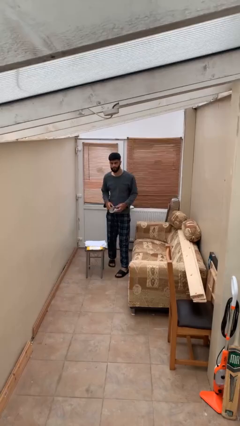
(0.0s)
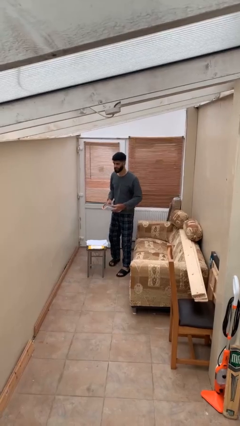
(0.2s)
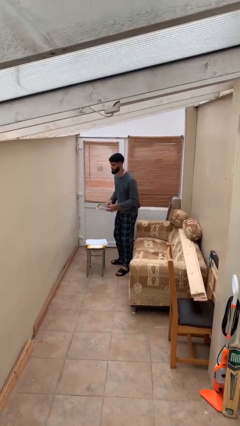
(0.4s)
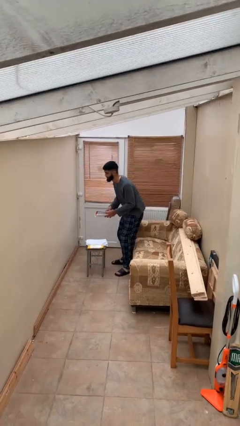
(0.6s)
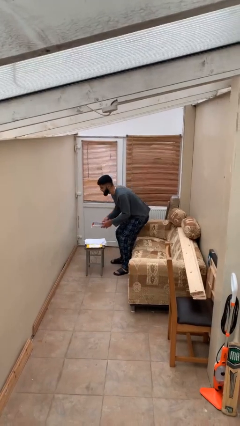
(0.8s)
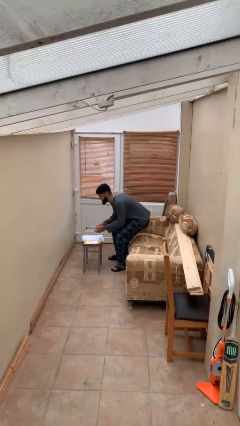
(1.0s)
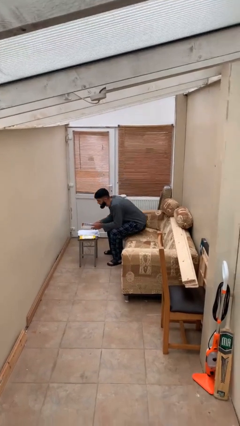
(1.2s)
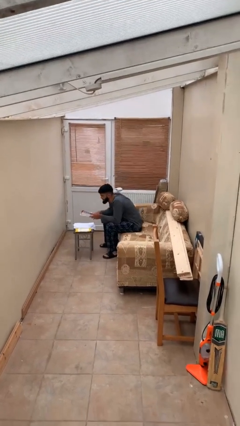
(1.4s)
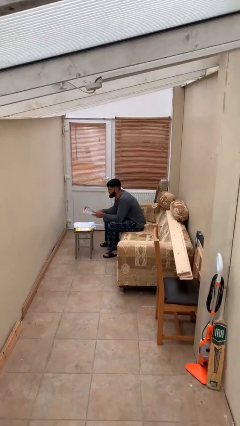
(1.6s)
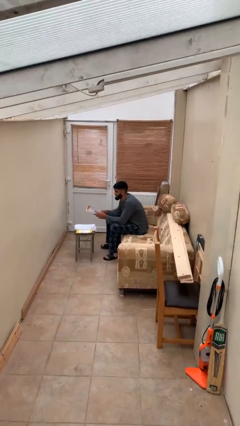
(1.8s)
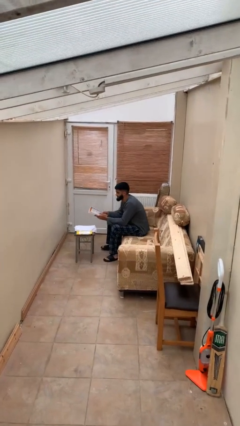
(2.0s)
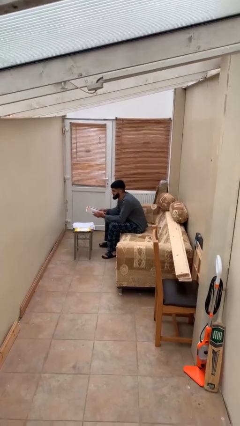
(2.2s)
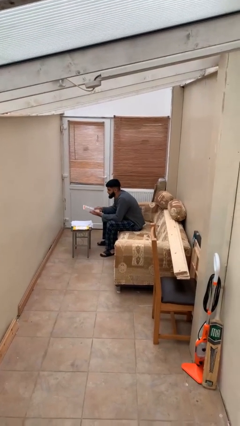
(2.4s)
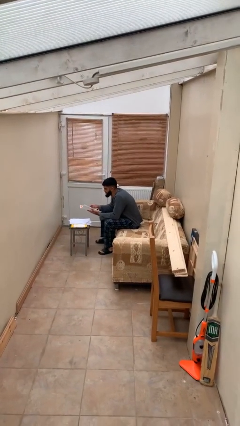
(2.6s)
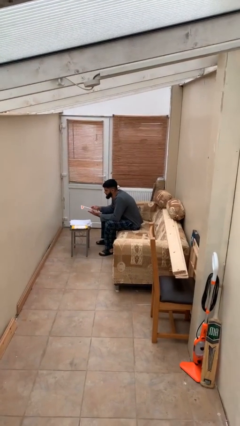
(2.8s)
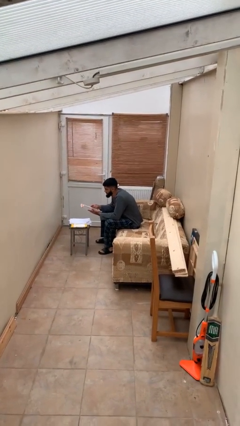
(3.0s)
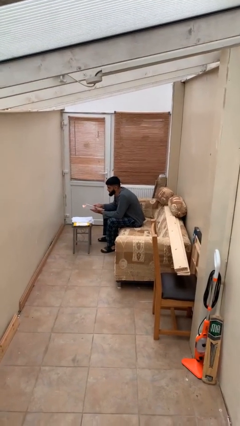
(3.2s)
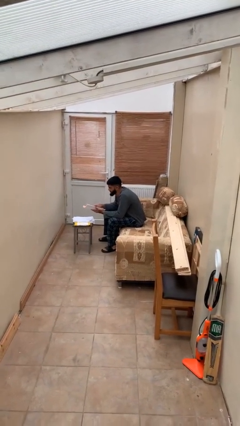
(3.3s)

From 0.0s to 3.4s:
person sits down

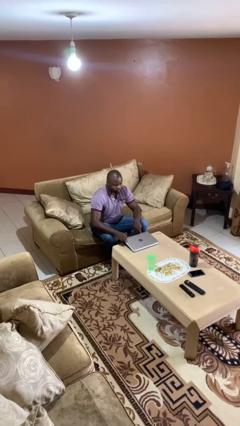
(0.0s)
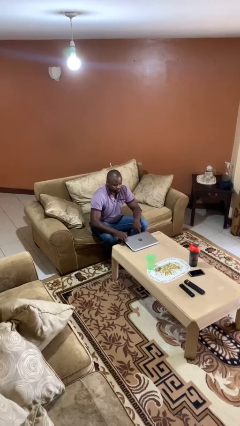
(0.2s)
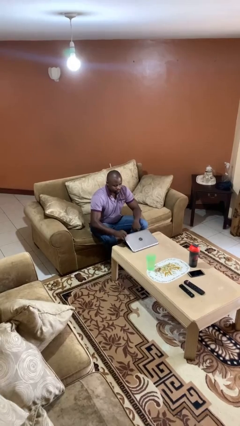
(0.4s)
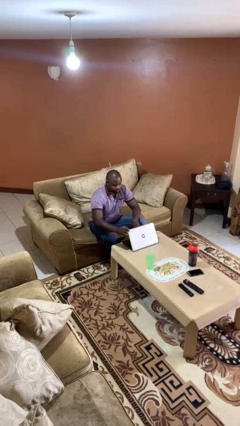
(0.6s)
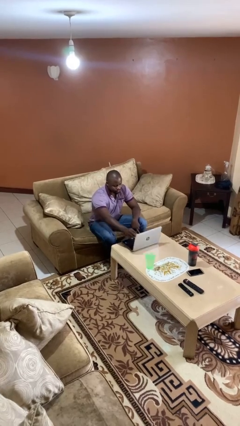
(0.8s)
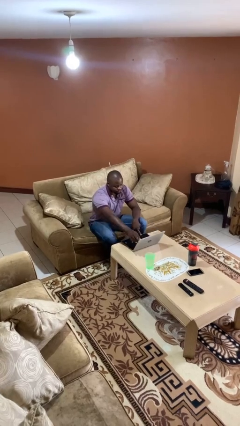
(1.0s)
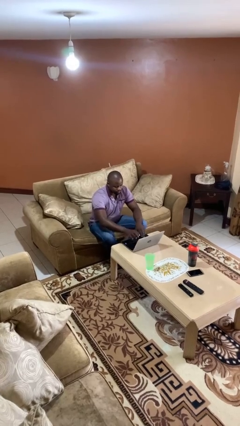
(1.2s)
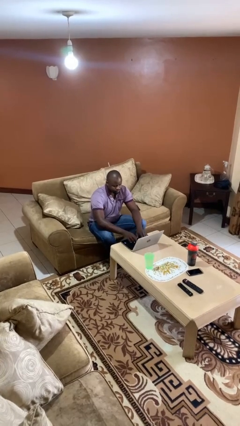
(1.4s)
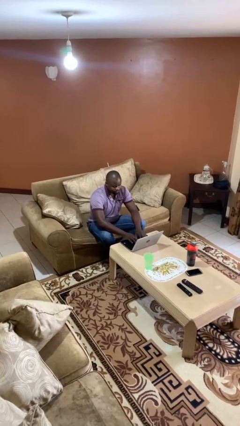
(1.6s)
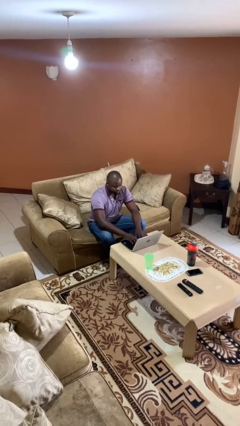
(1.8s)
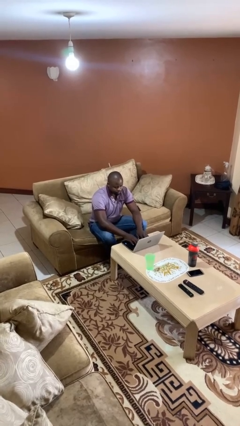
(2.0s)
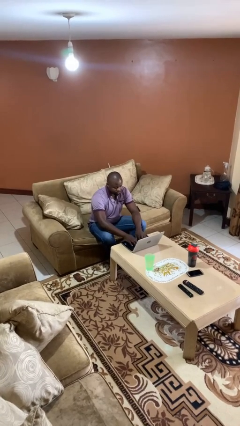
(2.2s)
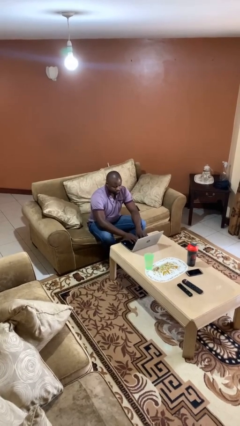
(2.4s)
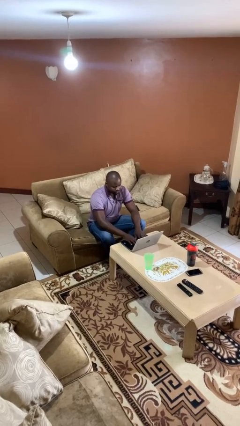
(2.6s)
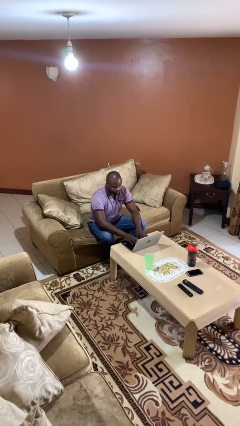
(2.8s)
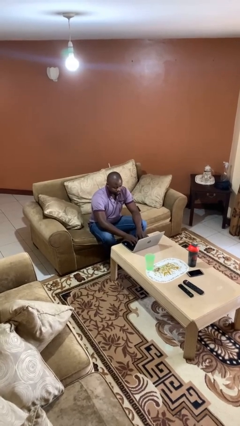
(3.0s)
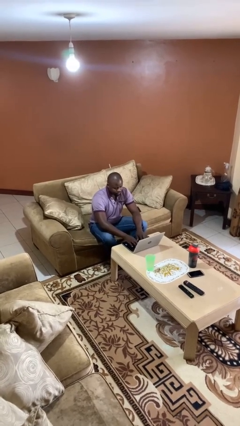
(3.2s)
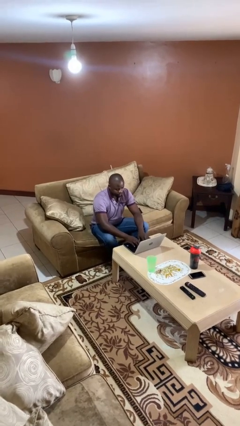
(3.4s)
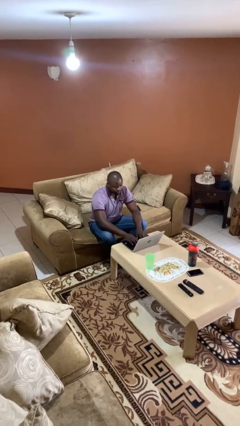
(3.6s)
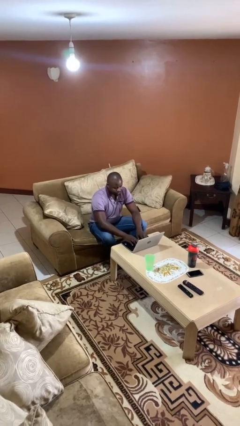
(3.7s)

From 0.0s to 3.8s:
person interacts with laptop

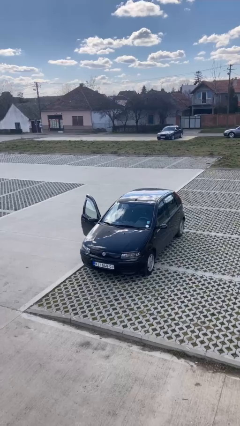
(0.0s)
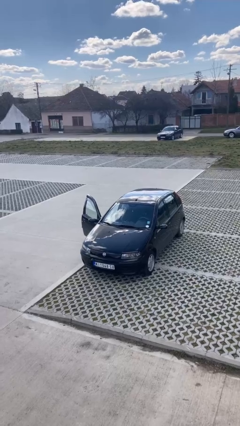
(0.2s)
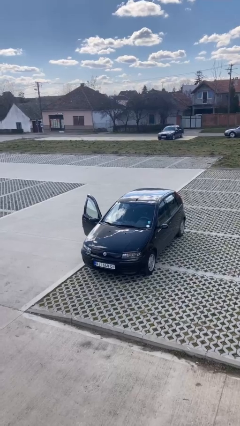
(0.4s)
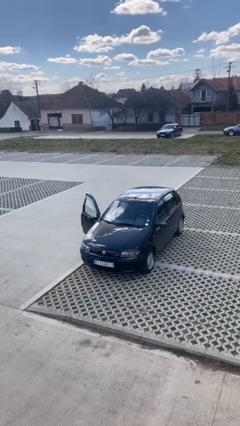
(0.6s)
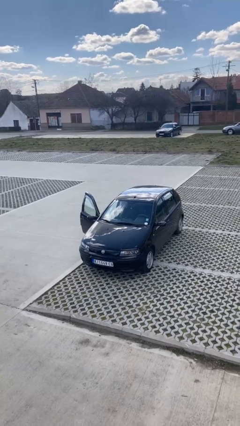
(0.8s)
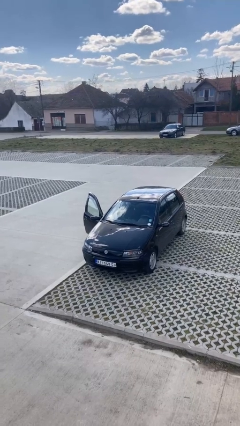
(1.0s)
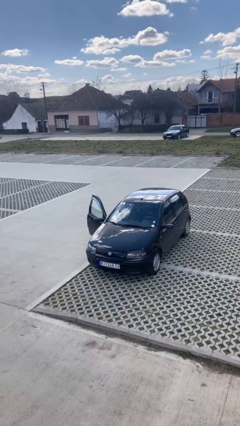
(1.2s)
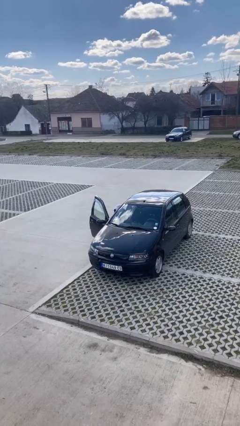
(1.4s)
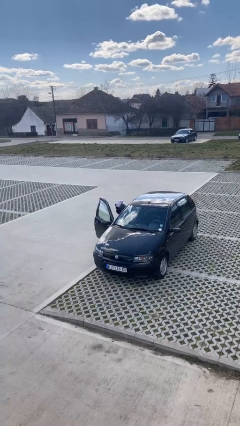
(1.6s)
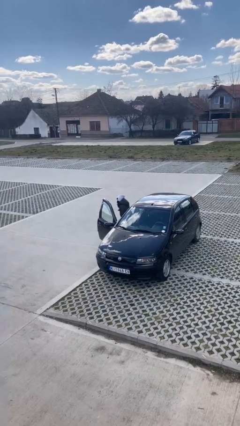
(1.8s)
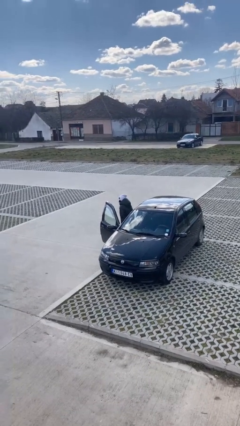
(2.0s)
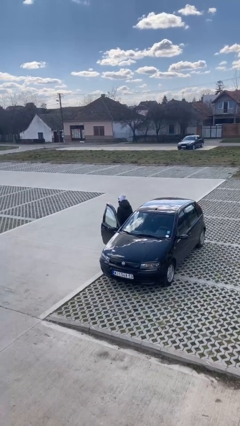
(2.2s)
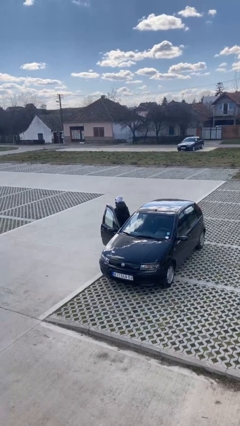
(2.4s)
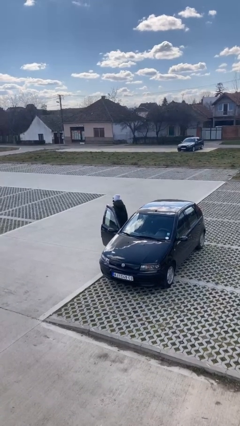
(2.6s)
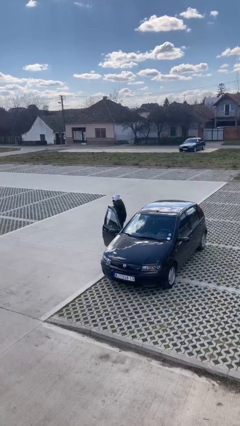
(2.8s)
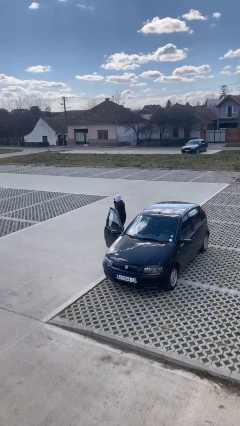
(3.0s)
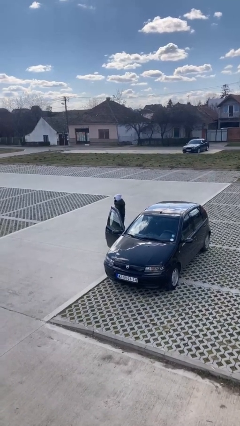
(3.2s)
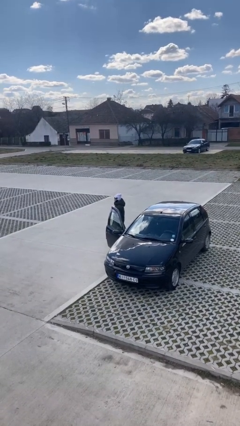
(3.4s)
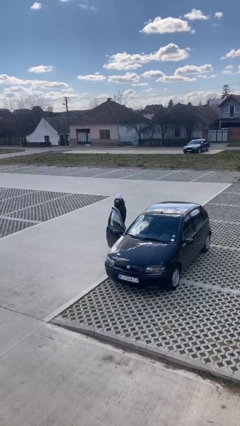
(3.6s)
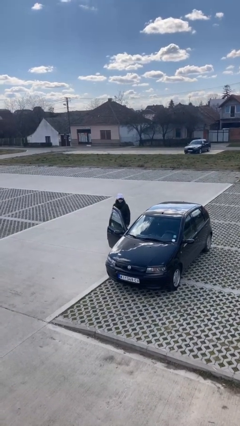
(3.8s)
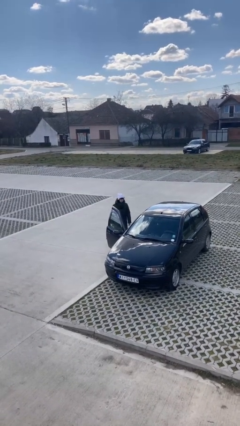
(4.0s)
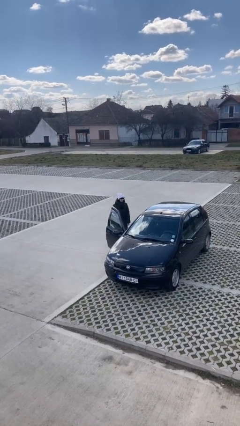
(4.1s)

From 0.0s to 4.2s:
person exits car

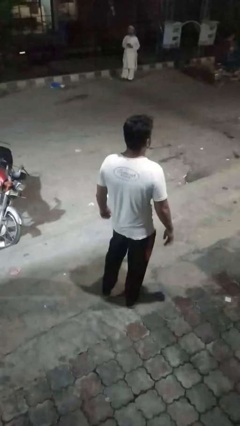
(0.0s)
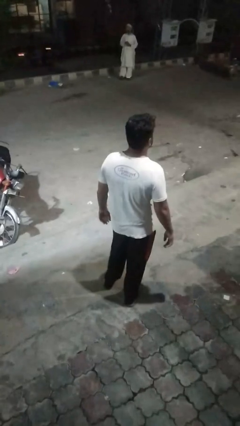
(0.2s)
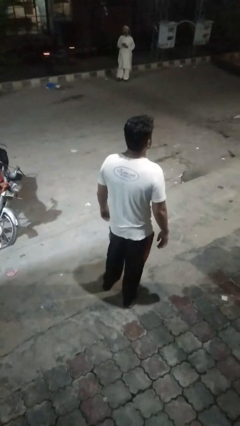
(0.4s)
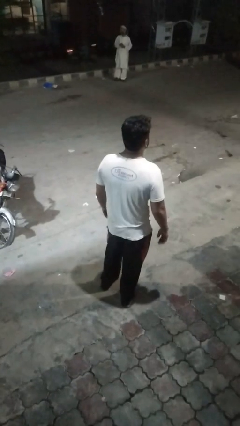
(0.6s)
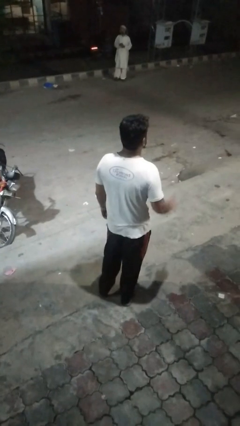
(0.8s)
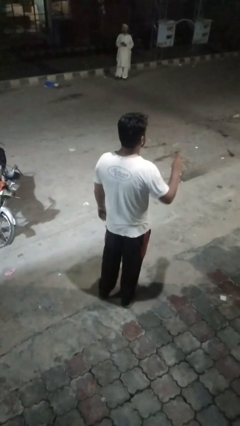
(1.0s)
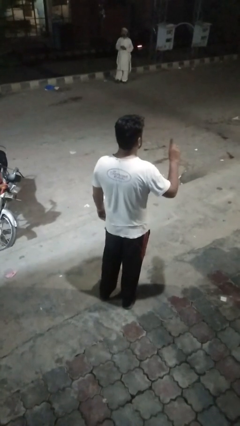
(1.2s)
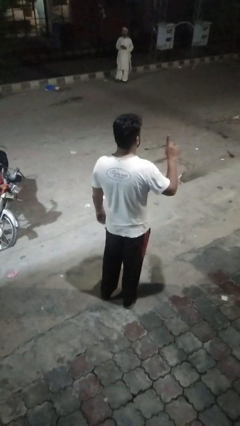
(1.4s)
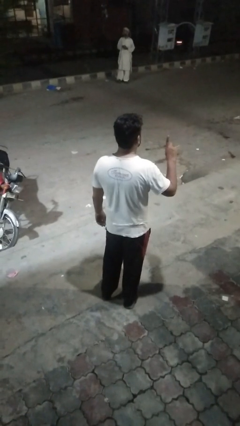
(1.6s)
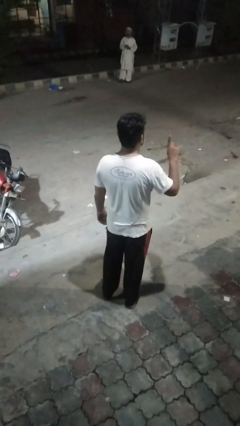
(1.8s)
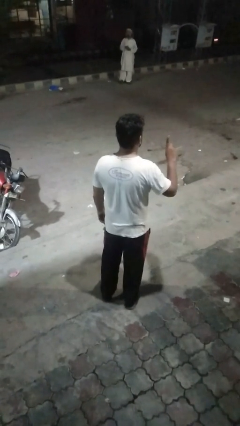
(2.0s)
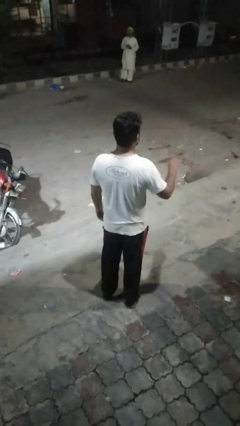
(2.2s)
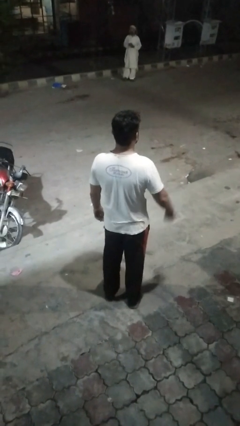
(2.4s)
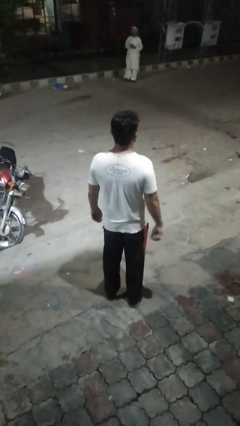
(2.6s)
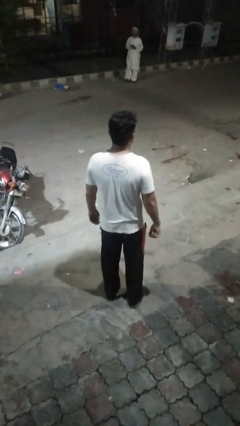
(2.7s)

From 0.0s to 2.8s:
person gestures number one

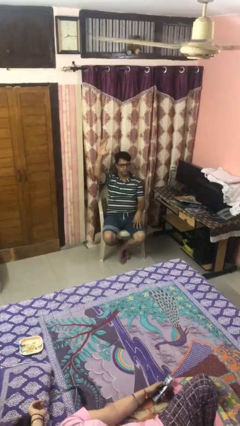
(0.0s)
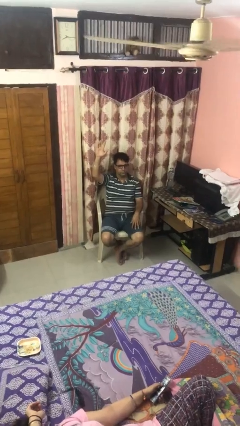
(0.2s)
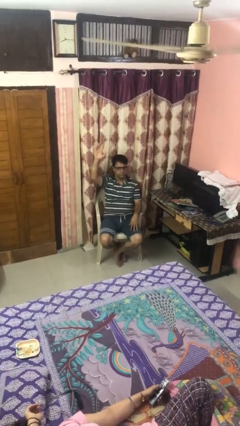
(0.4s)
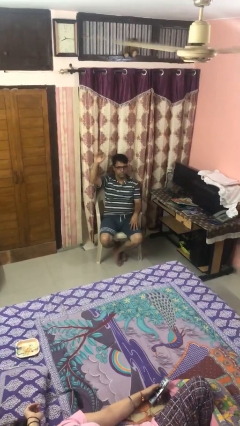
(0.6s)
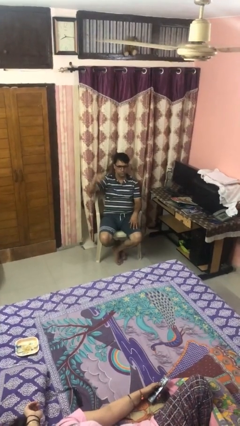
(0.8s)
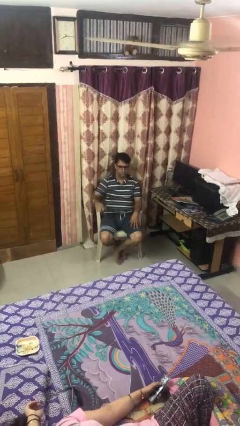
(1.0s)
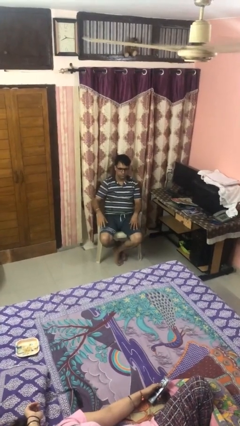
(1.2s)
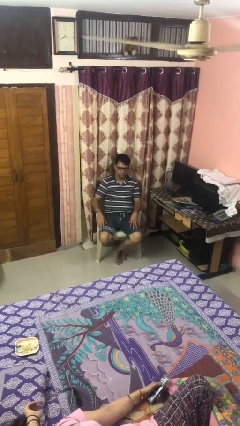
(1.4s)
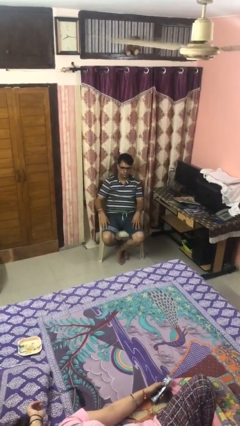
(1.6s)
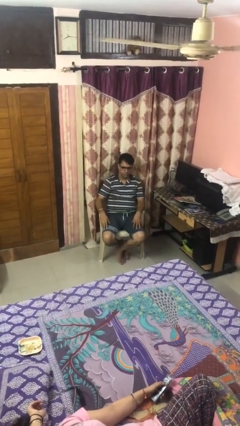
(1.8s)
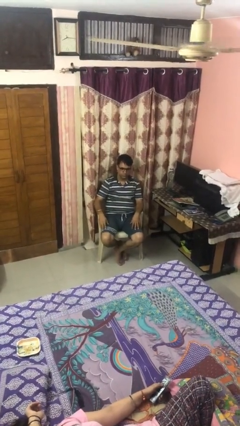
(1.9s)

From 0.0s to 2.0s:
person gestures lower hand

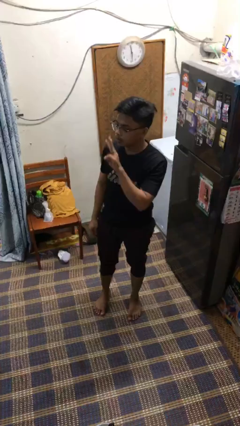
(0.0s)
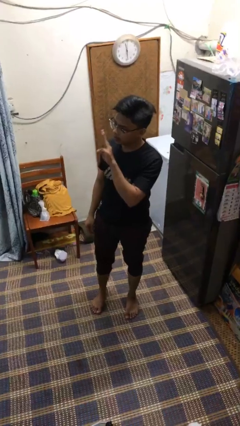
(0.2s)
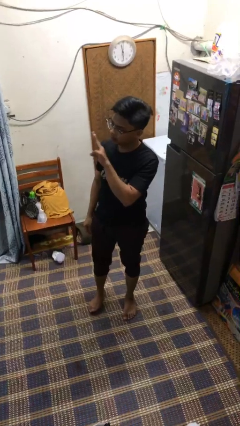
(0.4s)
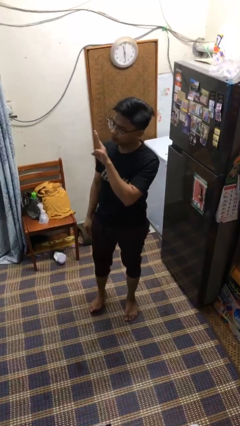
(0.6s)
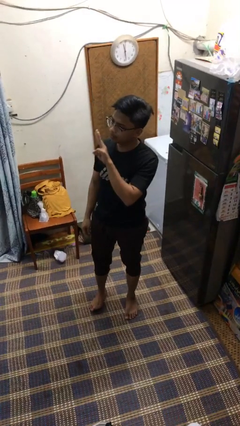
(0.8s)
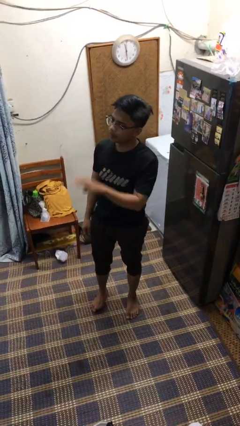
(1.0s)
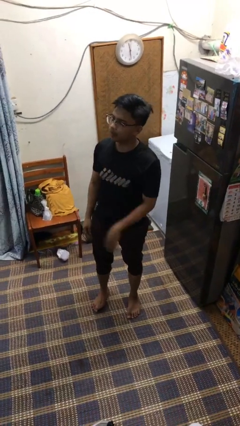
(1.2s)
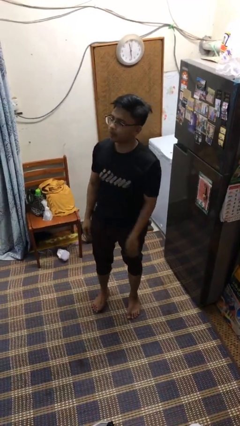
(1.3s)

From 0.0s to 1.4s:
person gestures number three
